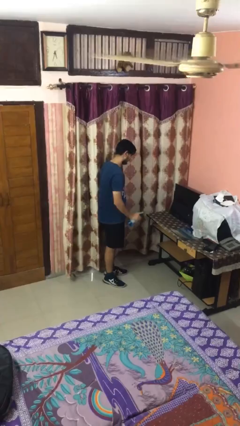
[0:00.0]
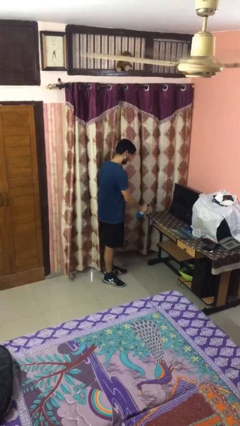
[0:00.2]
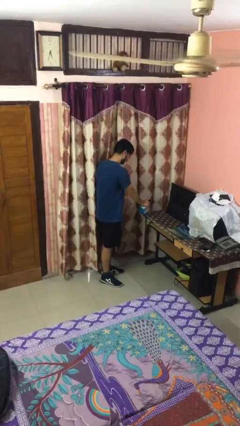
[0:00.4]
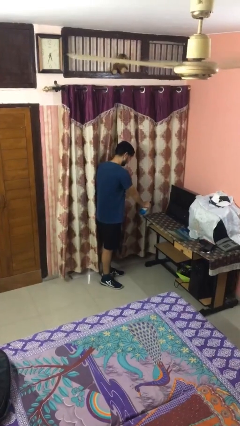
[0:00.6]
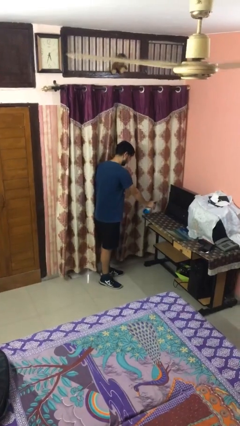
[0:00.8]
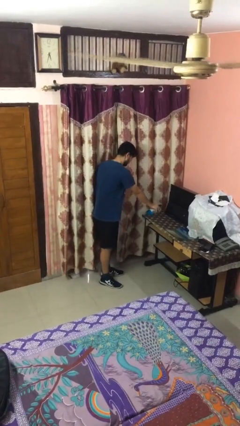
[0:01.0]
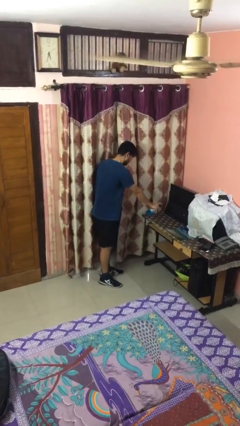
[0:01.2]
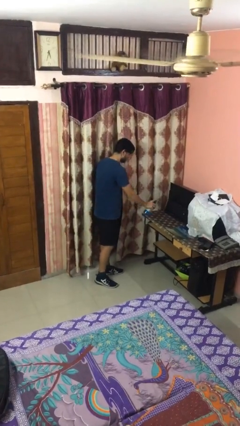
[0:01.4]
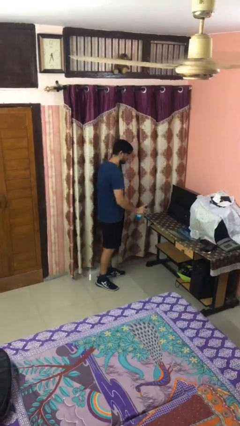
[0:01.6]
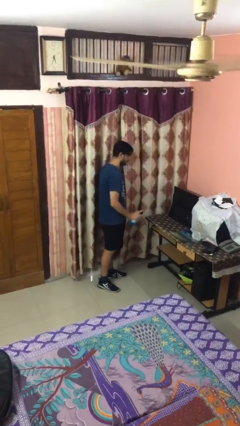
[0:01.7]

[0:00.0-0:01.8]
person sprays from bottle

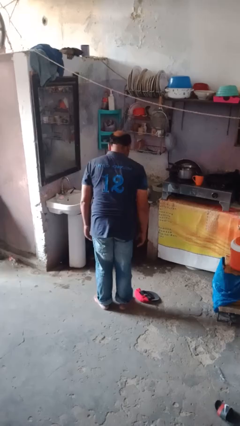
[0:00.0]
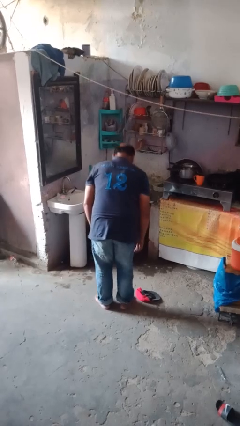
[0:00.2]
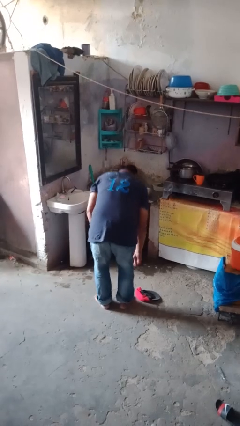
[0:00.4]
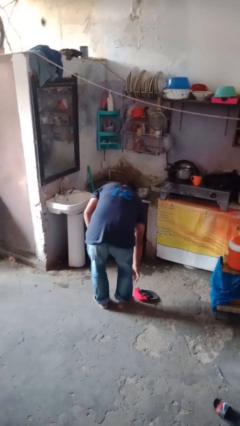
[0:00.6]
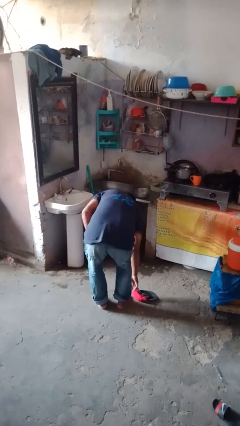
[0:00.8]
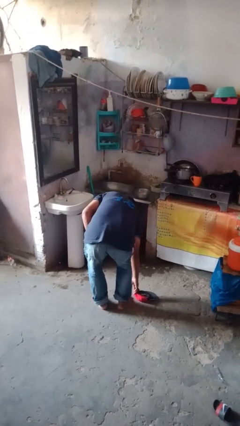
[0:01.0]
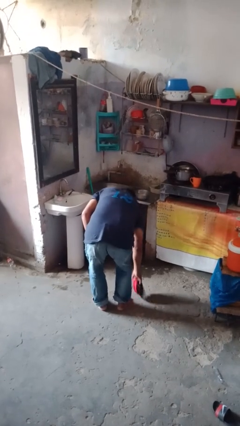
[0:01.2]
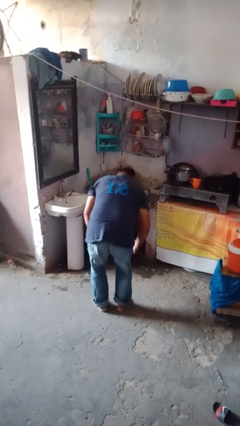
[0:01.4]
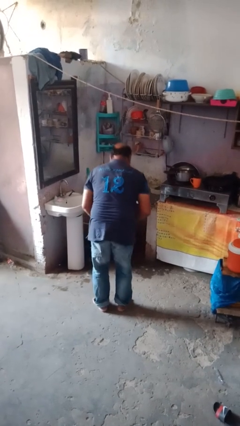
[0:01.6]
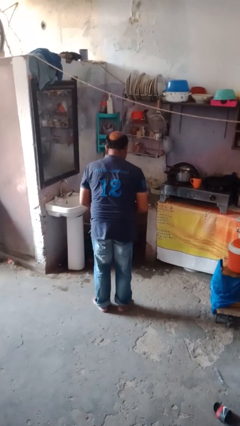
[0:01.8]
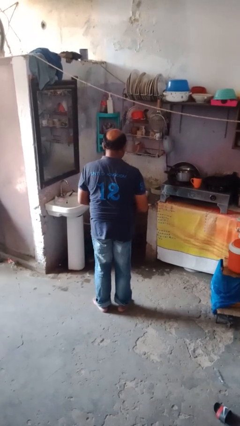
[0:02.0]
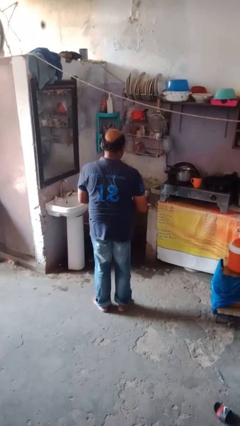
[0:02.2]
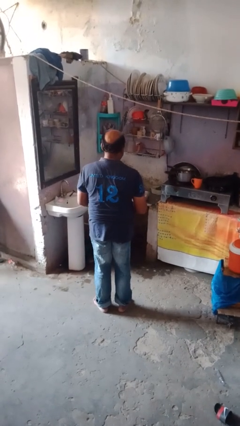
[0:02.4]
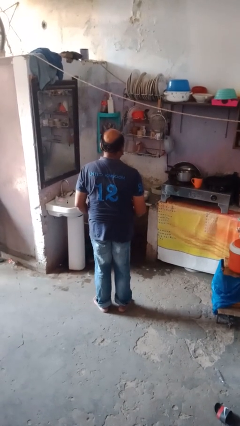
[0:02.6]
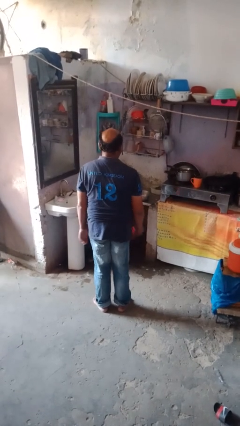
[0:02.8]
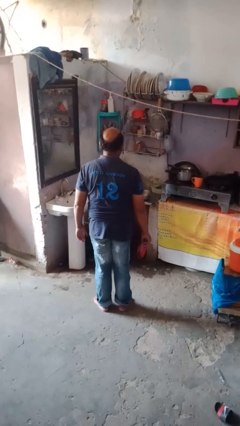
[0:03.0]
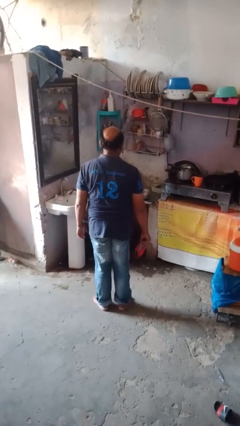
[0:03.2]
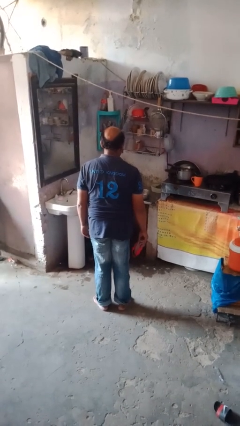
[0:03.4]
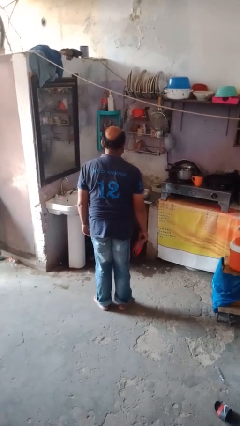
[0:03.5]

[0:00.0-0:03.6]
person picks up object from floor

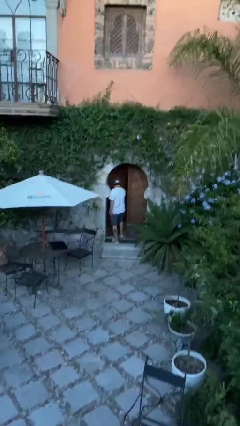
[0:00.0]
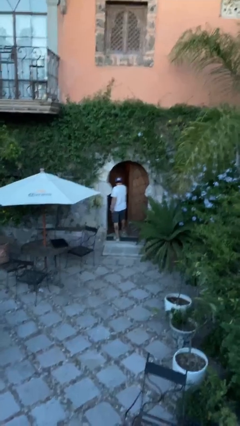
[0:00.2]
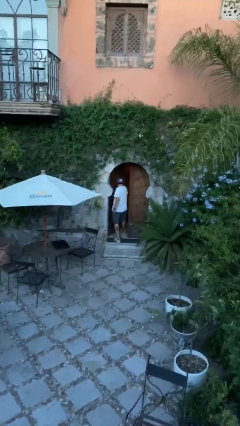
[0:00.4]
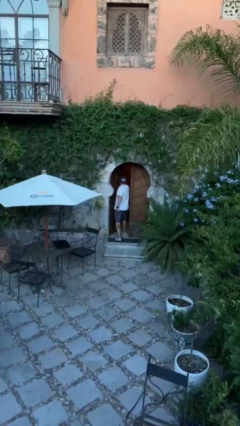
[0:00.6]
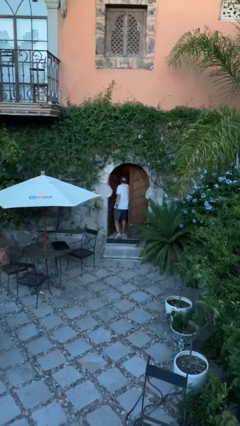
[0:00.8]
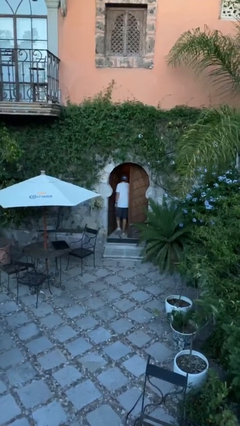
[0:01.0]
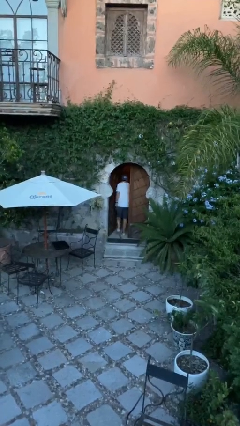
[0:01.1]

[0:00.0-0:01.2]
person opens facility door

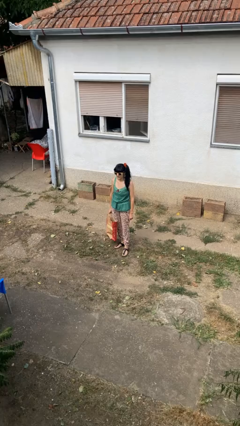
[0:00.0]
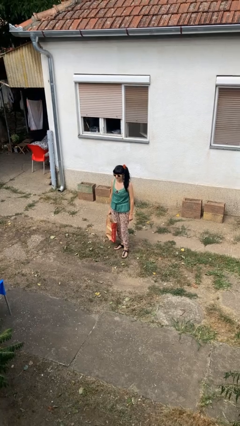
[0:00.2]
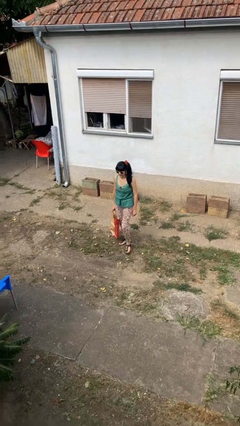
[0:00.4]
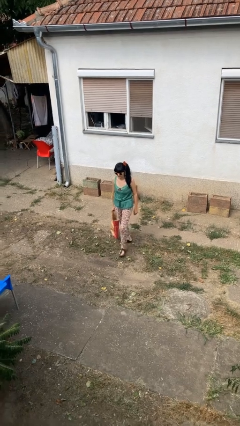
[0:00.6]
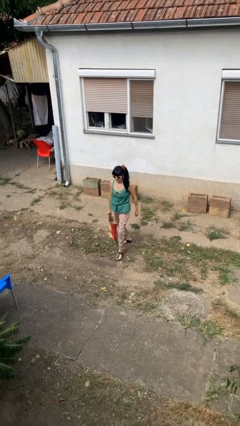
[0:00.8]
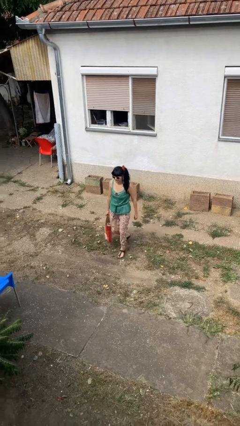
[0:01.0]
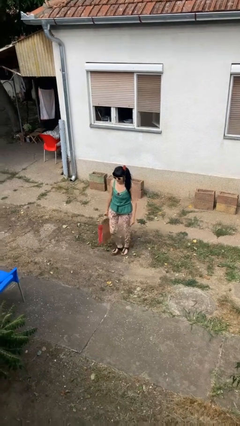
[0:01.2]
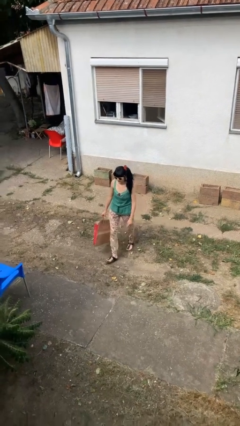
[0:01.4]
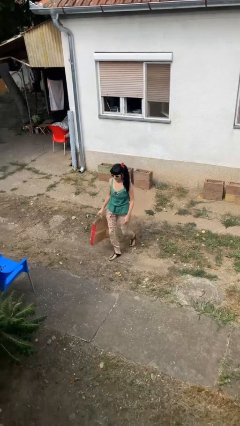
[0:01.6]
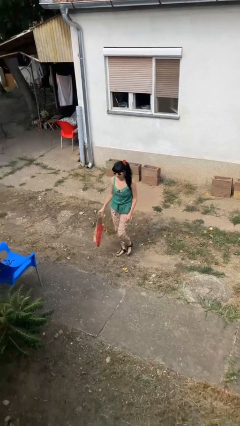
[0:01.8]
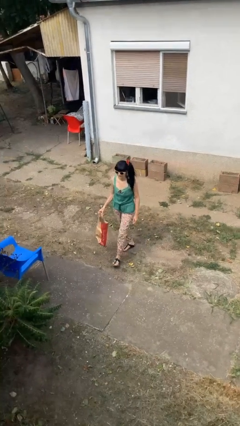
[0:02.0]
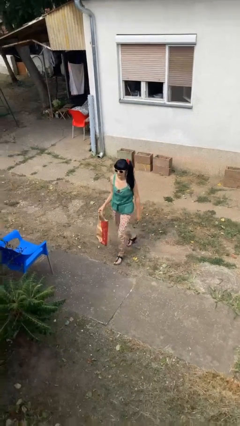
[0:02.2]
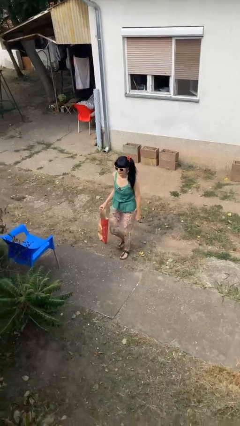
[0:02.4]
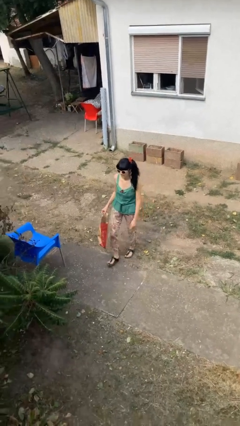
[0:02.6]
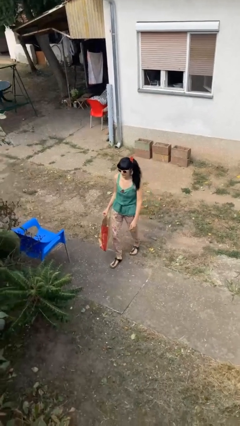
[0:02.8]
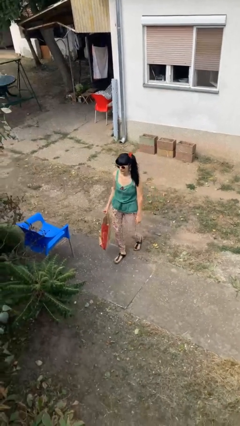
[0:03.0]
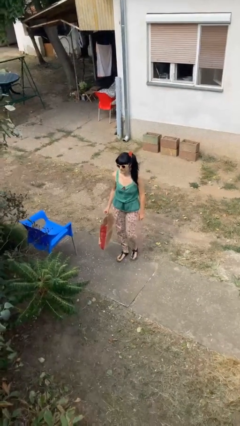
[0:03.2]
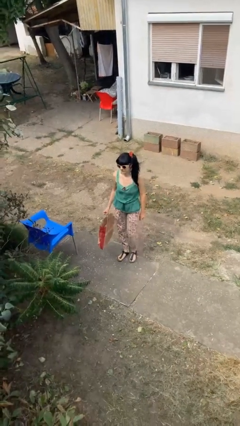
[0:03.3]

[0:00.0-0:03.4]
person carries groceries

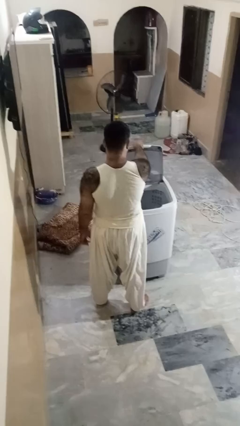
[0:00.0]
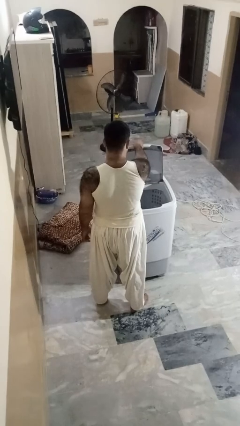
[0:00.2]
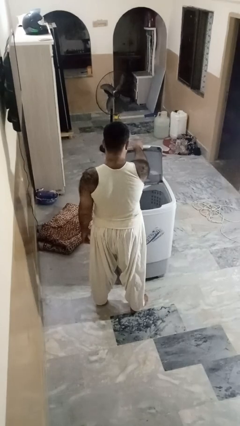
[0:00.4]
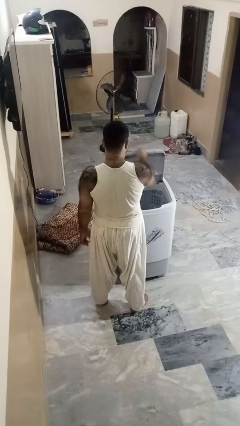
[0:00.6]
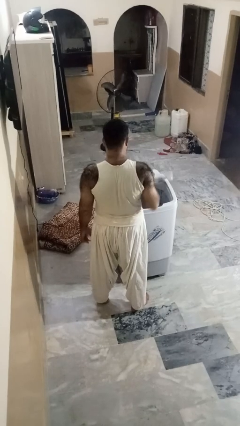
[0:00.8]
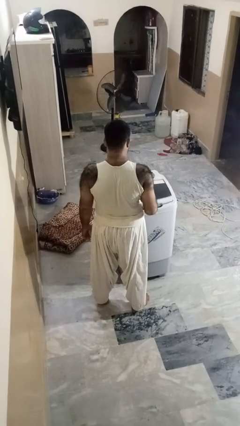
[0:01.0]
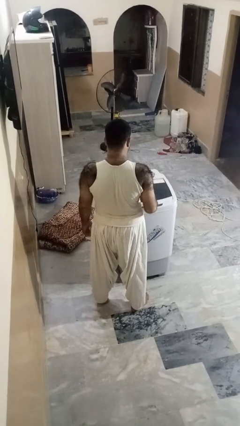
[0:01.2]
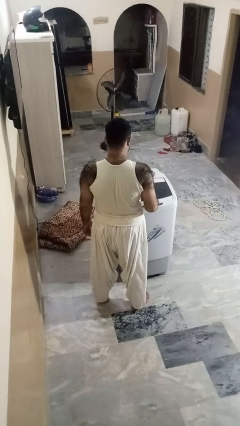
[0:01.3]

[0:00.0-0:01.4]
person closes clothes washer

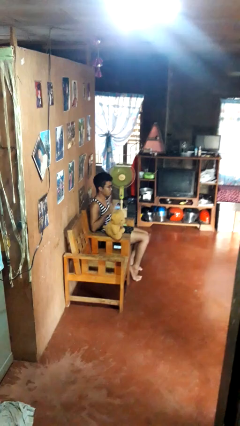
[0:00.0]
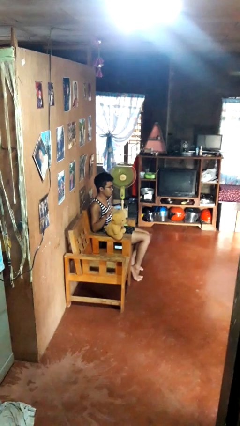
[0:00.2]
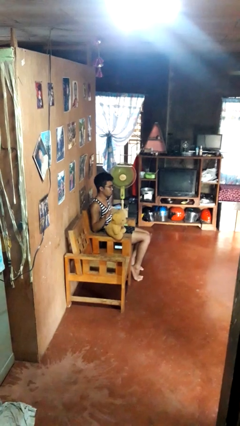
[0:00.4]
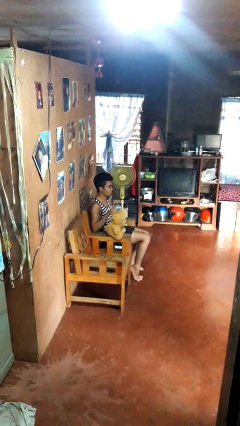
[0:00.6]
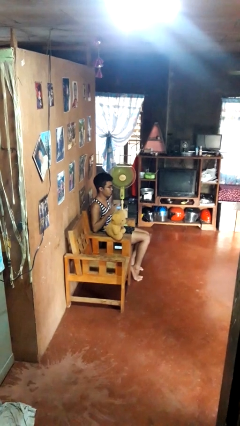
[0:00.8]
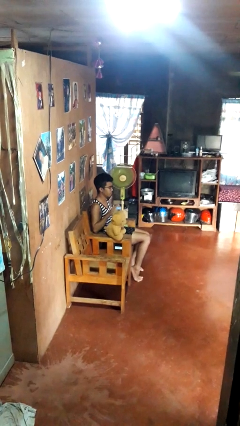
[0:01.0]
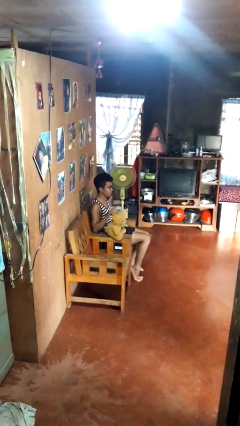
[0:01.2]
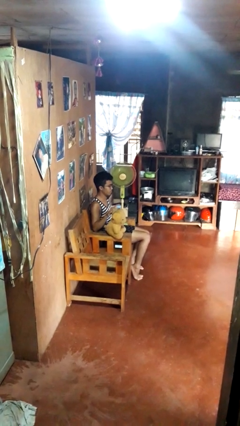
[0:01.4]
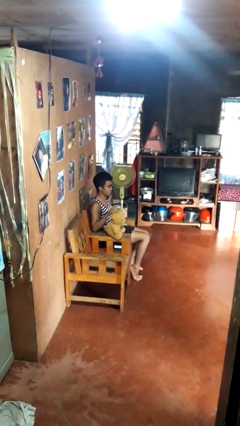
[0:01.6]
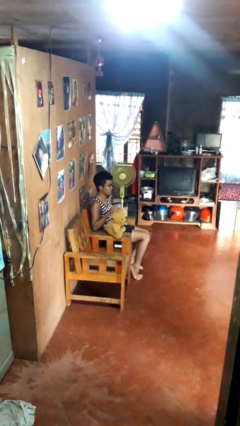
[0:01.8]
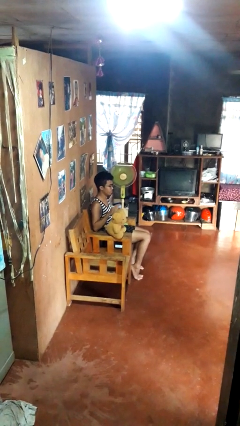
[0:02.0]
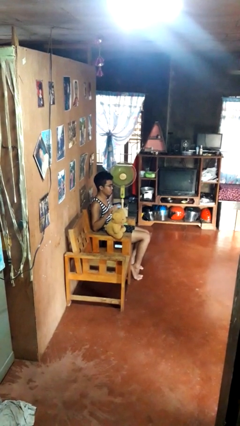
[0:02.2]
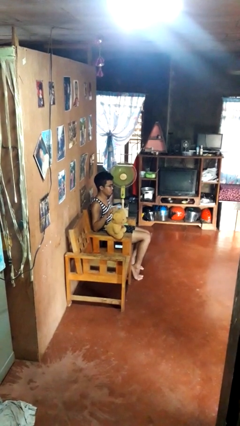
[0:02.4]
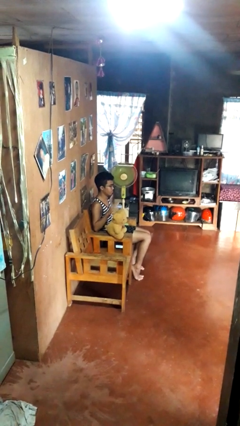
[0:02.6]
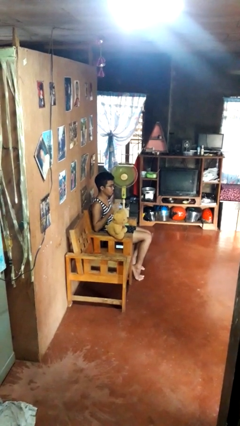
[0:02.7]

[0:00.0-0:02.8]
person waves hand over object

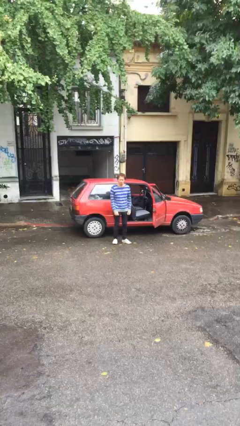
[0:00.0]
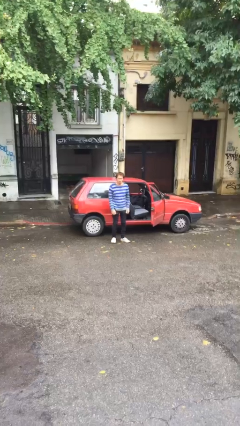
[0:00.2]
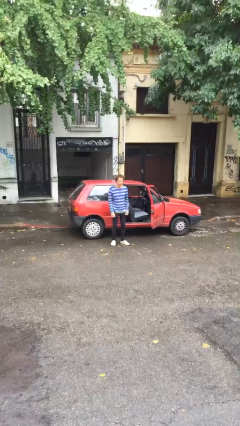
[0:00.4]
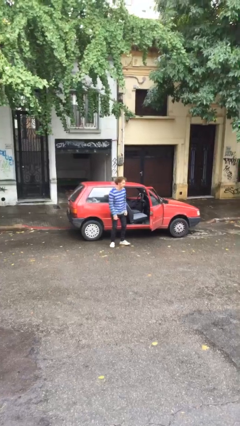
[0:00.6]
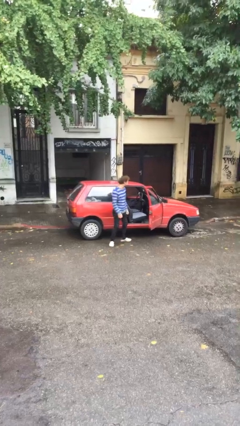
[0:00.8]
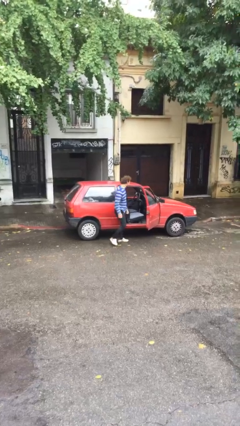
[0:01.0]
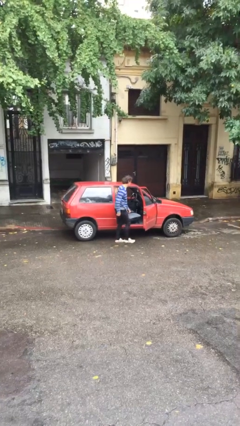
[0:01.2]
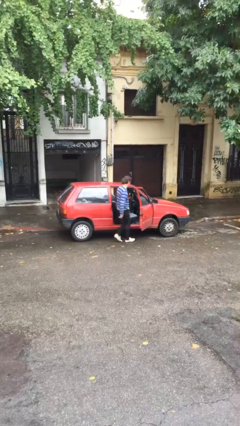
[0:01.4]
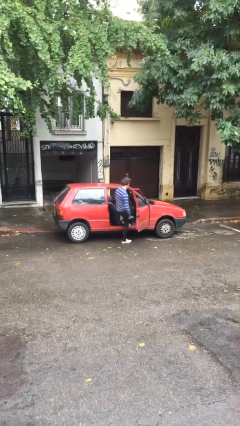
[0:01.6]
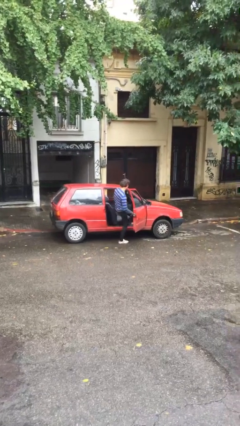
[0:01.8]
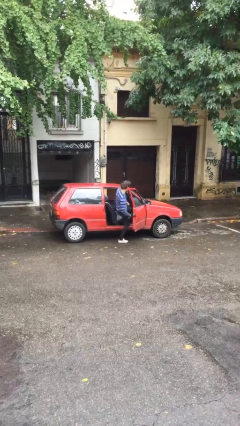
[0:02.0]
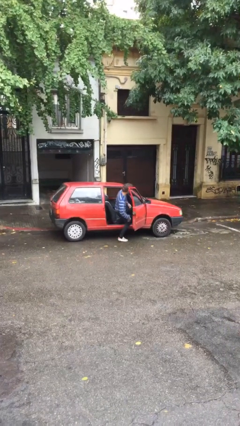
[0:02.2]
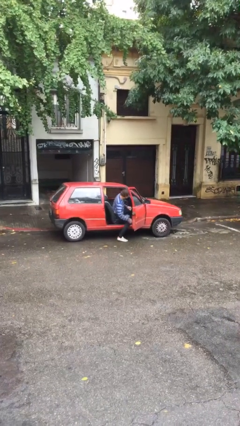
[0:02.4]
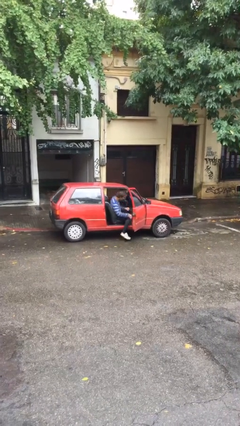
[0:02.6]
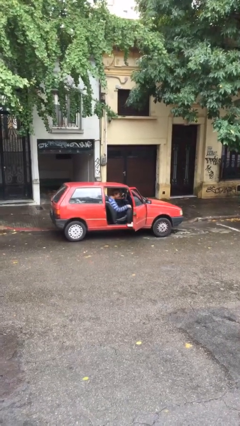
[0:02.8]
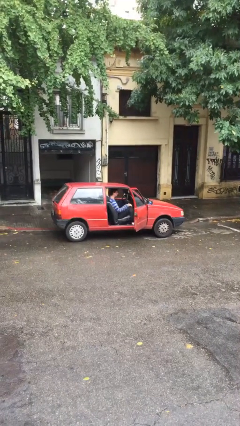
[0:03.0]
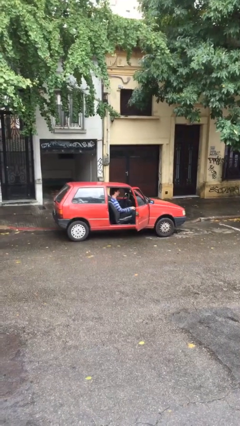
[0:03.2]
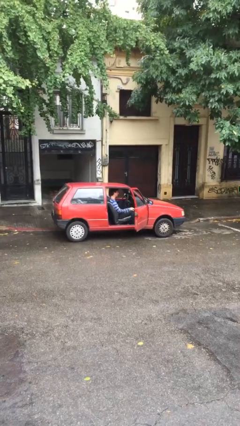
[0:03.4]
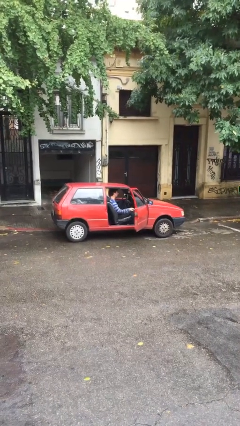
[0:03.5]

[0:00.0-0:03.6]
person enters car
